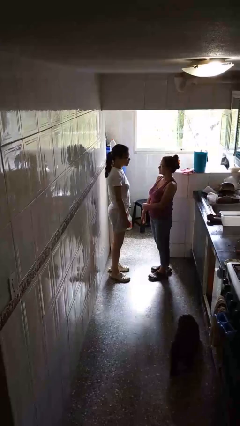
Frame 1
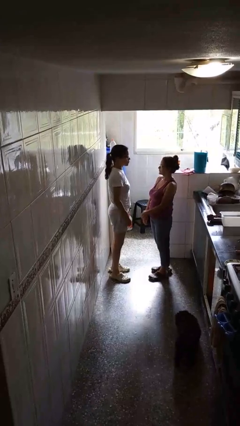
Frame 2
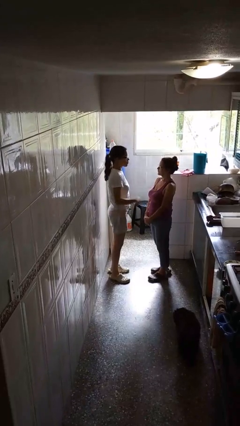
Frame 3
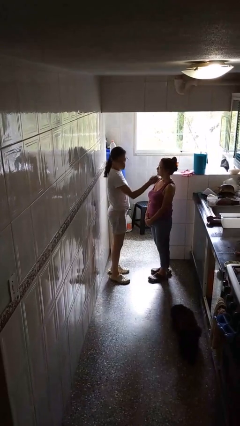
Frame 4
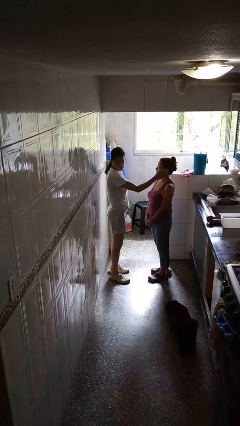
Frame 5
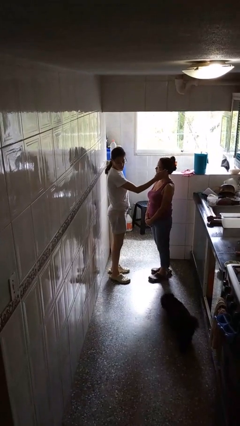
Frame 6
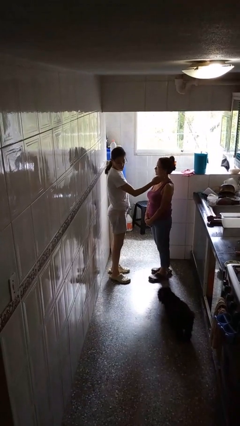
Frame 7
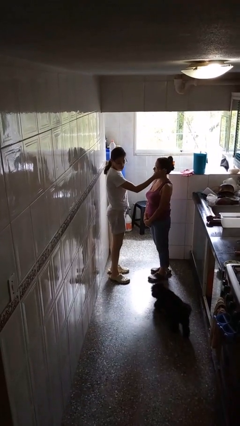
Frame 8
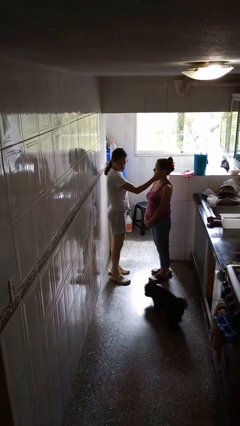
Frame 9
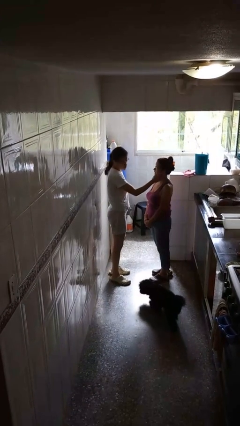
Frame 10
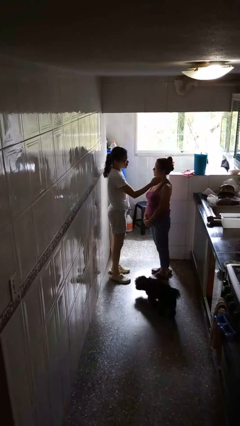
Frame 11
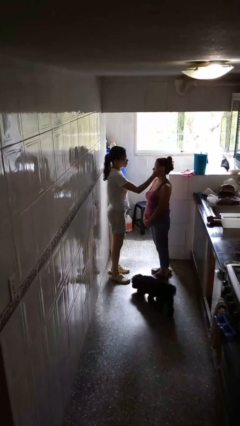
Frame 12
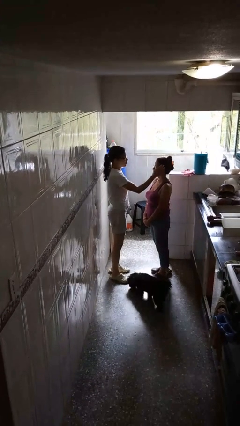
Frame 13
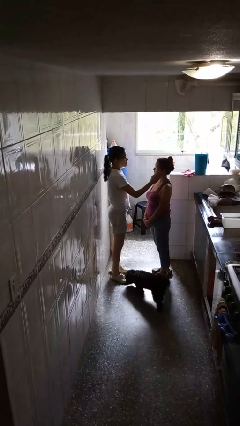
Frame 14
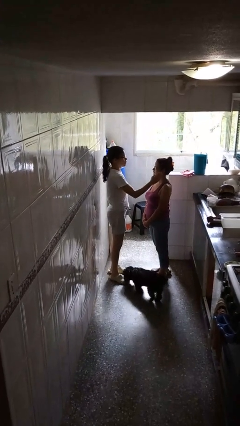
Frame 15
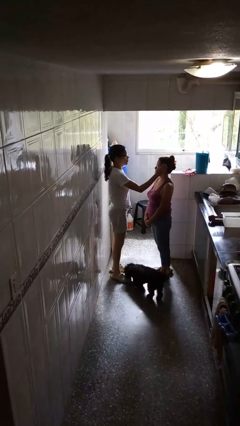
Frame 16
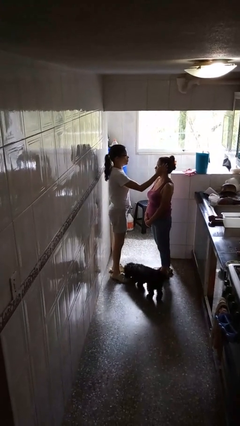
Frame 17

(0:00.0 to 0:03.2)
person touches face of person

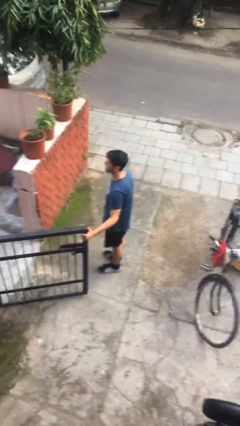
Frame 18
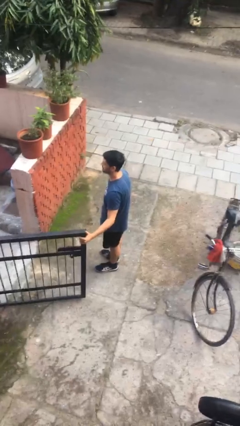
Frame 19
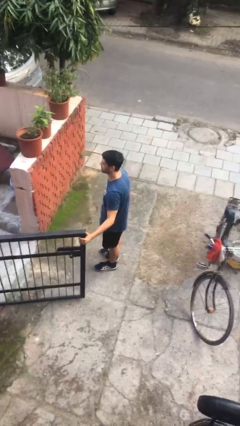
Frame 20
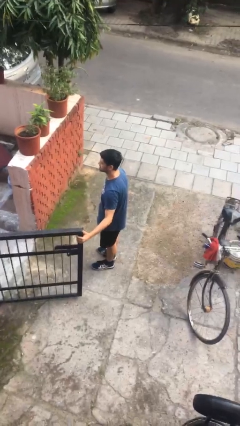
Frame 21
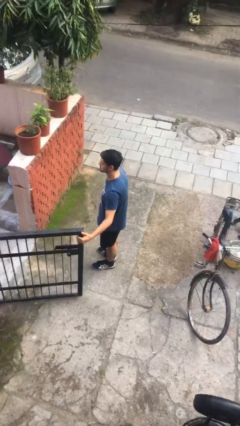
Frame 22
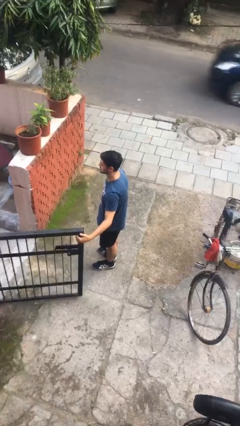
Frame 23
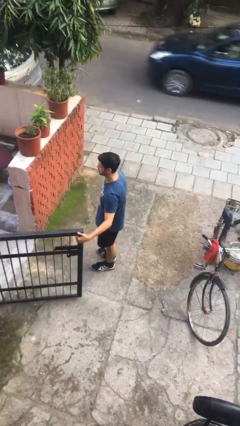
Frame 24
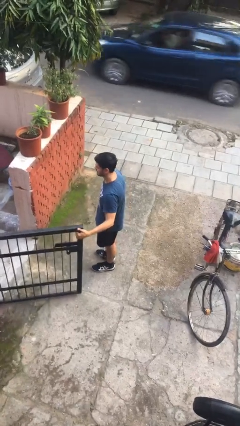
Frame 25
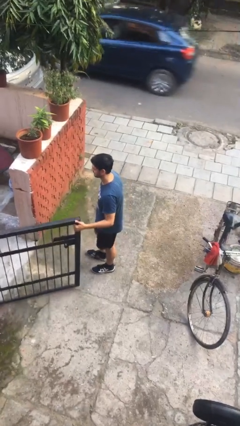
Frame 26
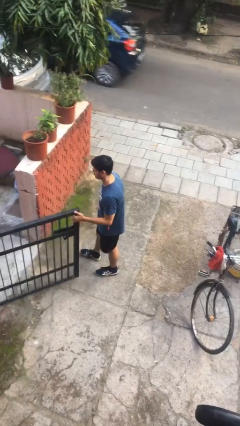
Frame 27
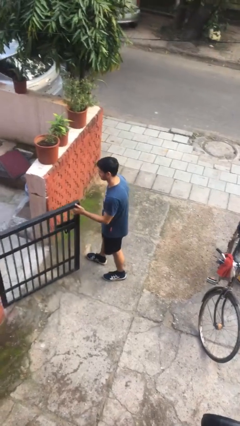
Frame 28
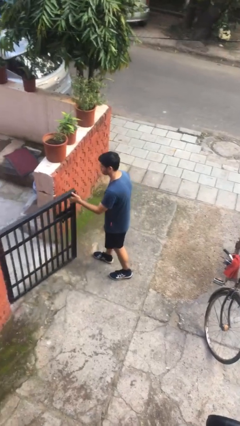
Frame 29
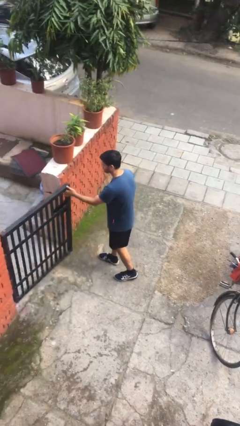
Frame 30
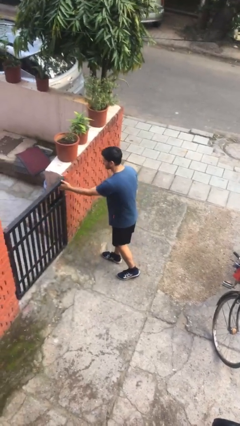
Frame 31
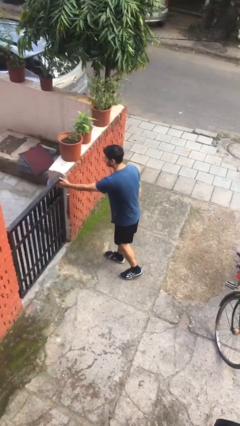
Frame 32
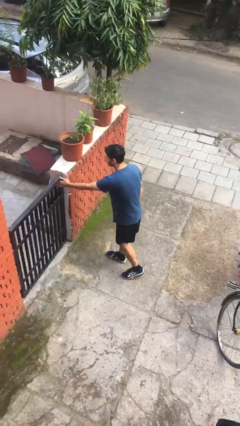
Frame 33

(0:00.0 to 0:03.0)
person closes gate

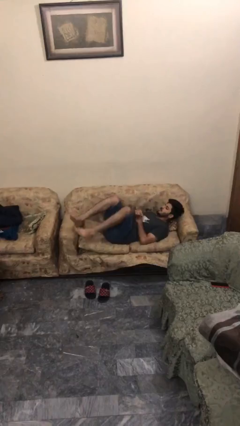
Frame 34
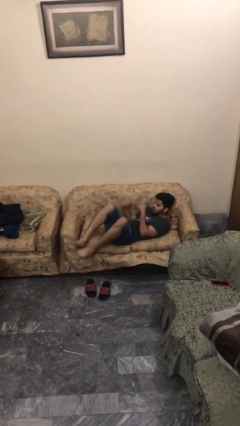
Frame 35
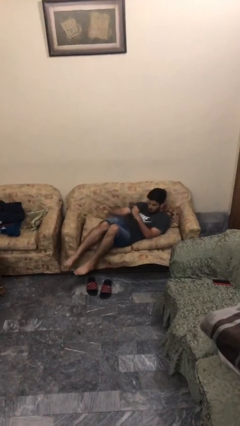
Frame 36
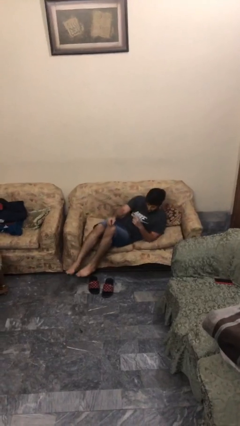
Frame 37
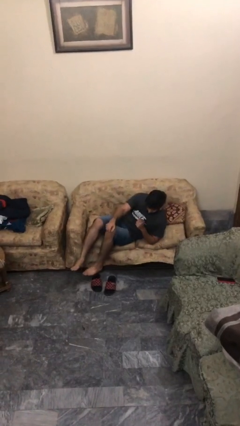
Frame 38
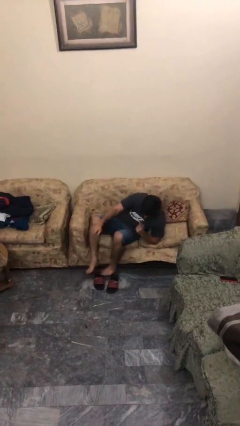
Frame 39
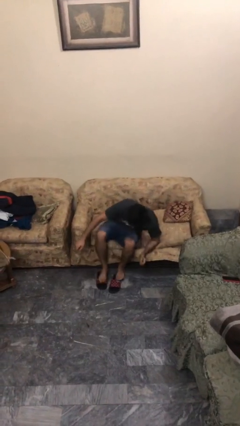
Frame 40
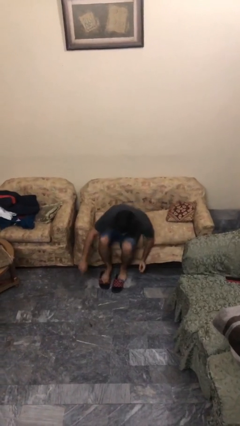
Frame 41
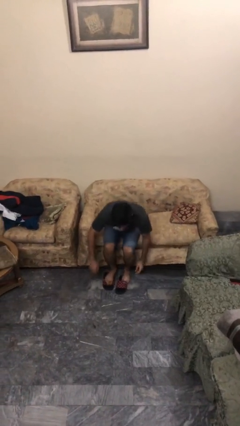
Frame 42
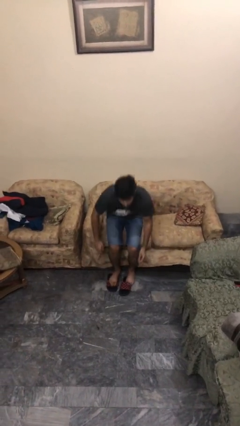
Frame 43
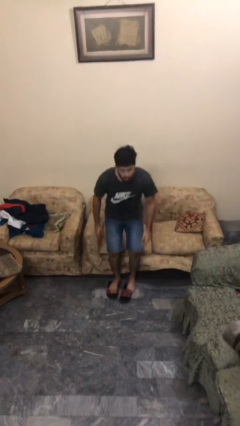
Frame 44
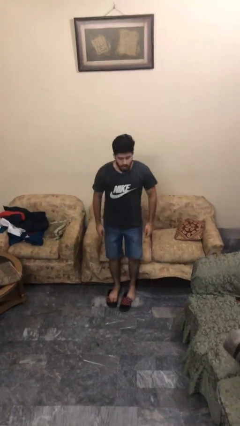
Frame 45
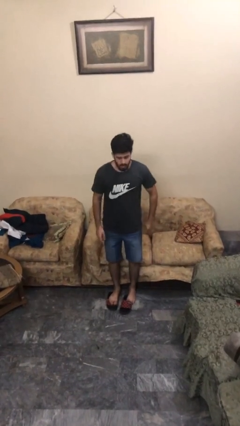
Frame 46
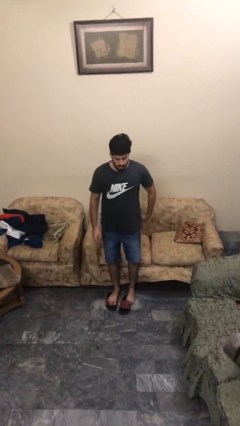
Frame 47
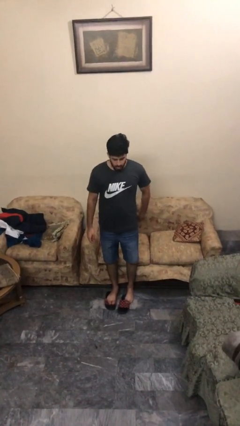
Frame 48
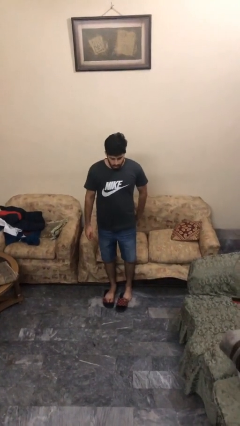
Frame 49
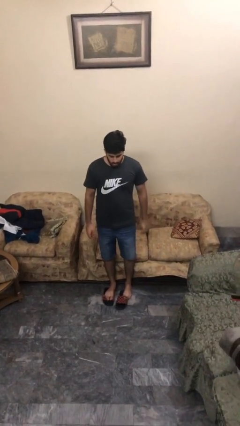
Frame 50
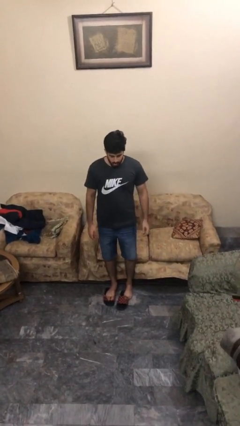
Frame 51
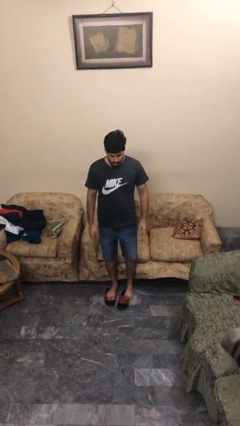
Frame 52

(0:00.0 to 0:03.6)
person stands up

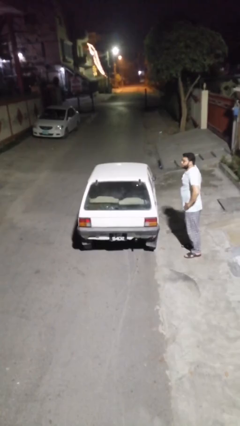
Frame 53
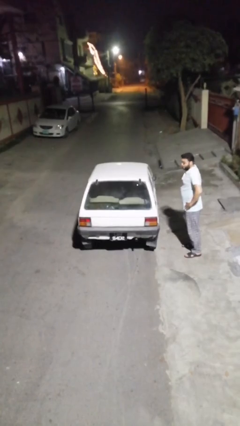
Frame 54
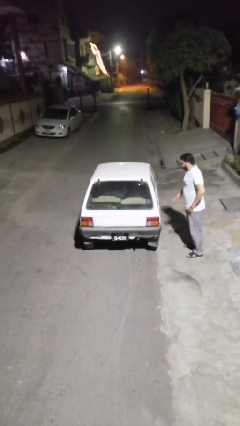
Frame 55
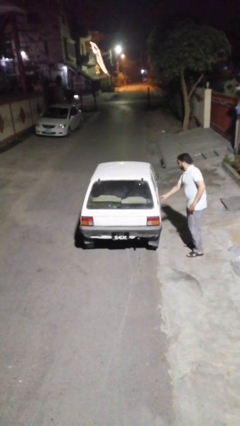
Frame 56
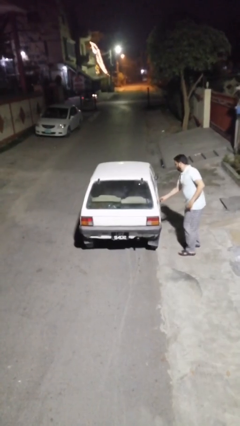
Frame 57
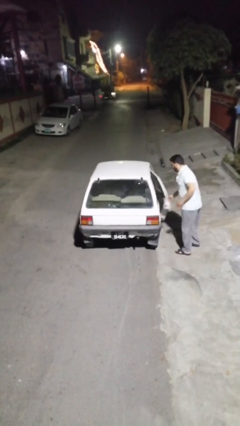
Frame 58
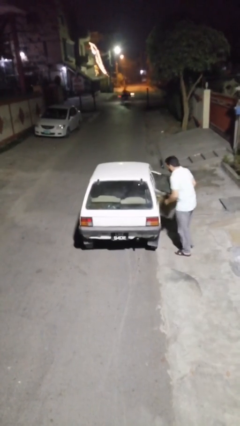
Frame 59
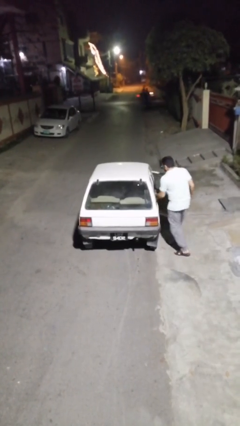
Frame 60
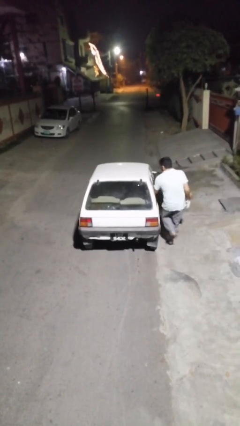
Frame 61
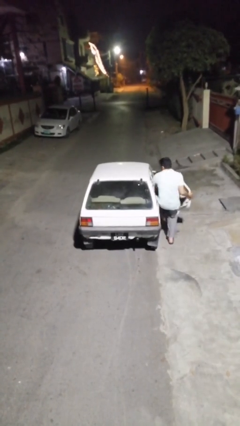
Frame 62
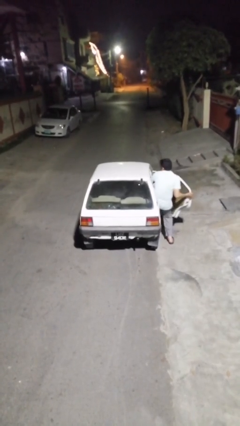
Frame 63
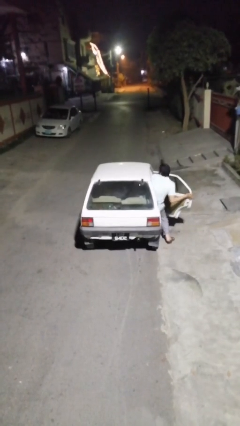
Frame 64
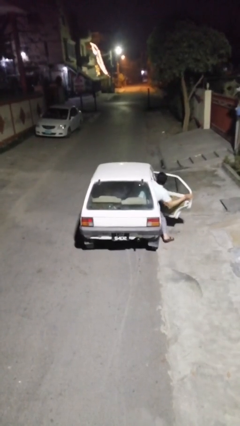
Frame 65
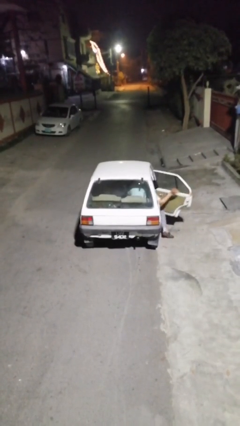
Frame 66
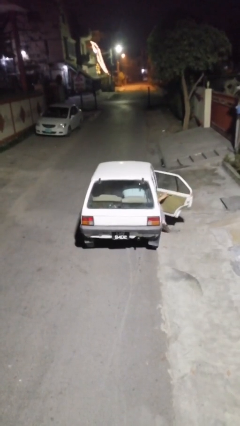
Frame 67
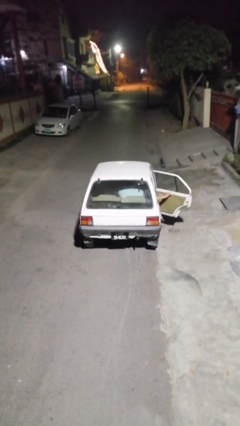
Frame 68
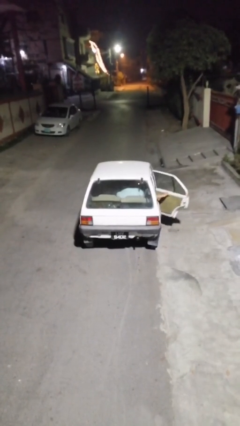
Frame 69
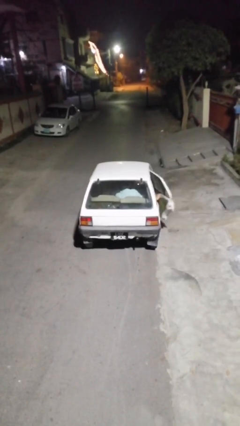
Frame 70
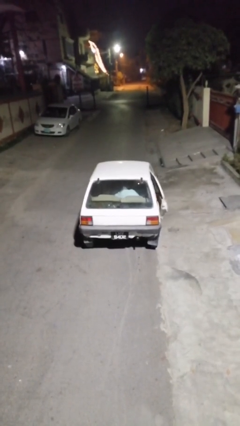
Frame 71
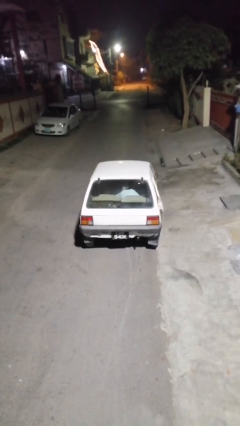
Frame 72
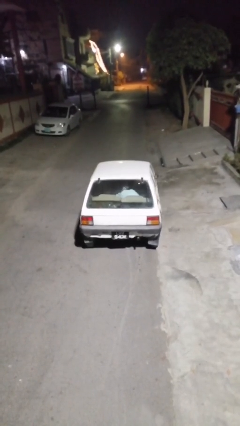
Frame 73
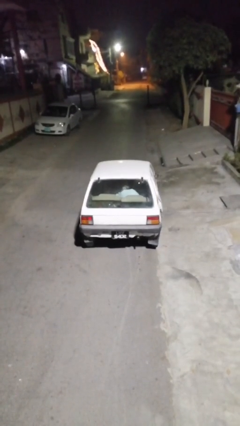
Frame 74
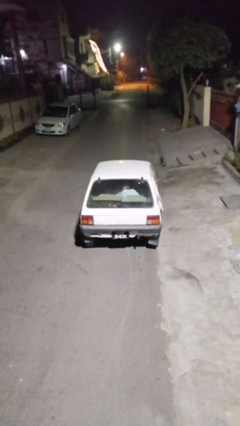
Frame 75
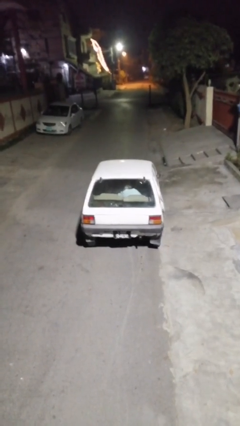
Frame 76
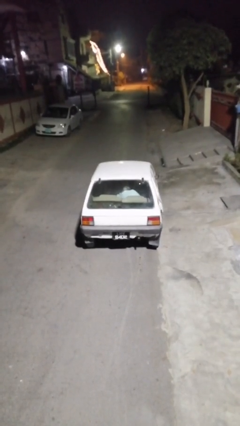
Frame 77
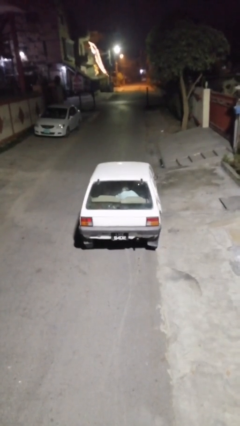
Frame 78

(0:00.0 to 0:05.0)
car picks up person

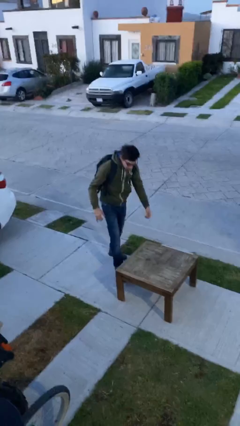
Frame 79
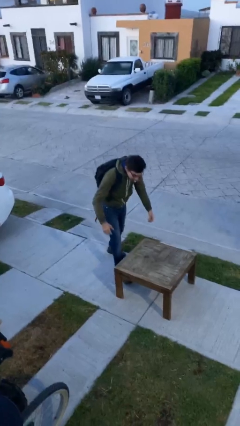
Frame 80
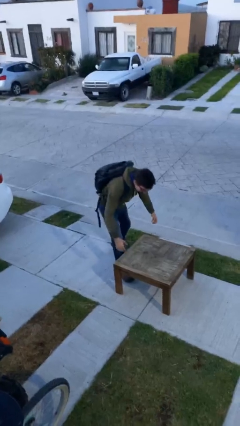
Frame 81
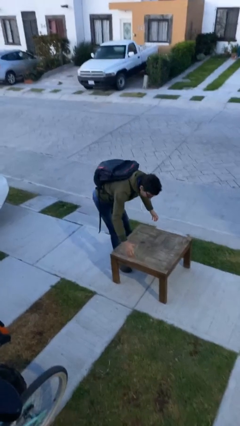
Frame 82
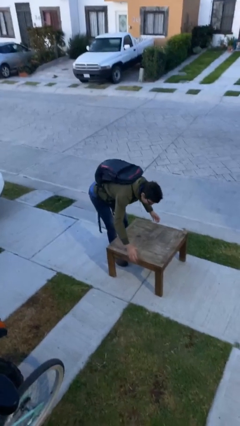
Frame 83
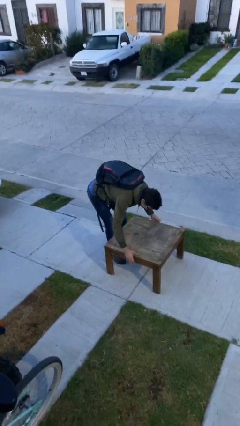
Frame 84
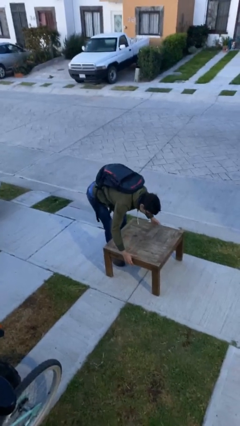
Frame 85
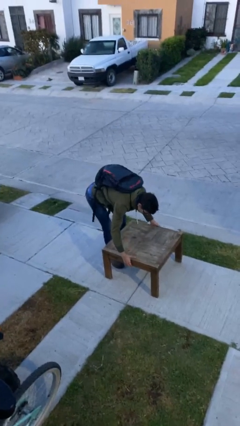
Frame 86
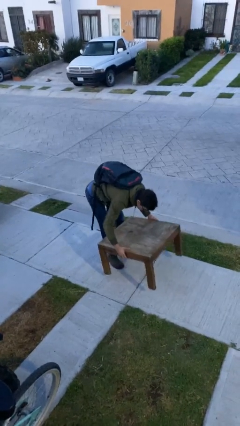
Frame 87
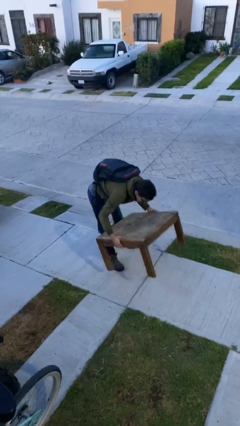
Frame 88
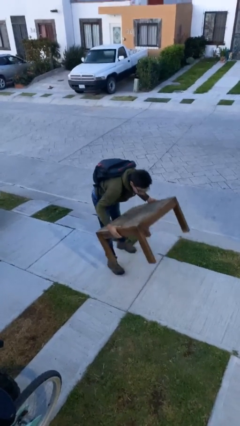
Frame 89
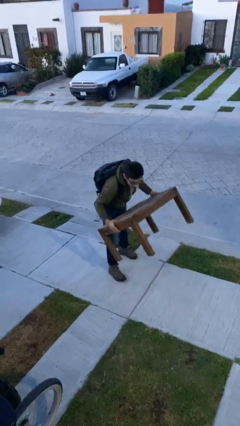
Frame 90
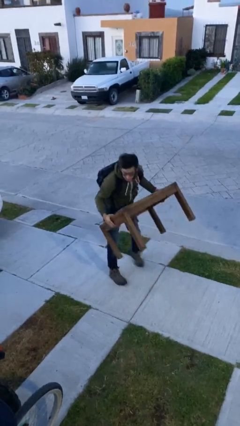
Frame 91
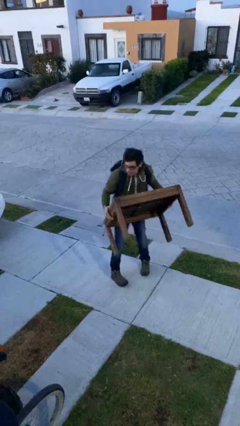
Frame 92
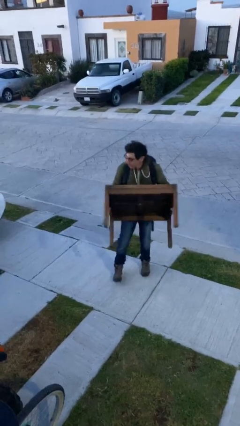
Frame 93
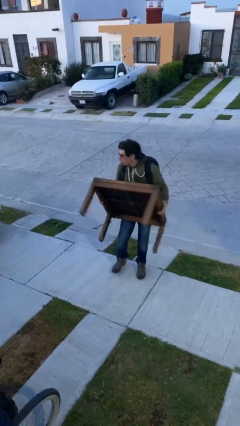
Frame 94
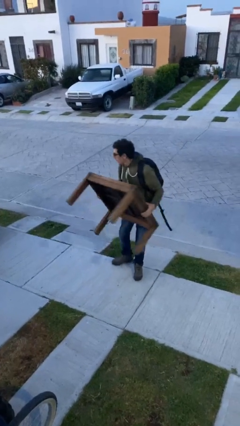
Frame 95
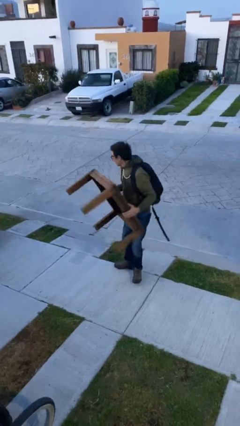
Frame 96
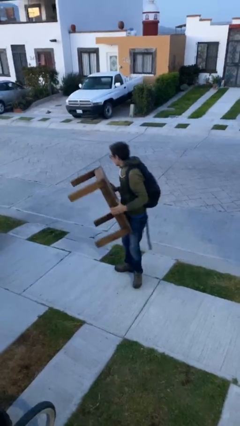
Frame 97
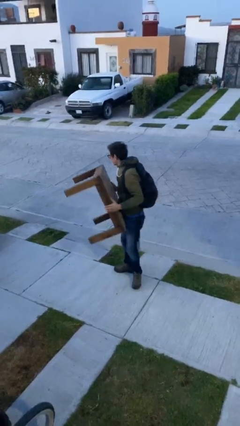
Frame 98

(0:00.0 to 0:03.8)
person picks up object from floor
